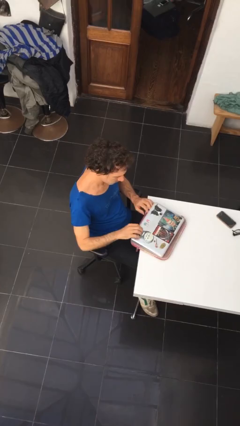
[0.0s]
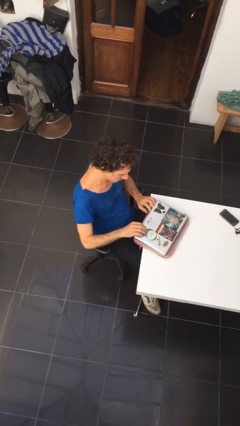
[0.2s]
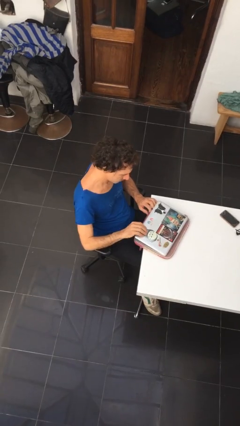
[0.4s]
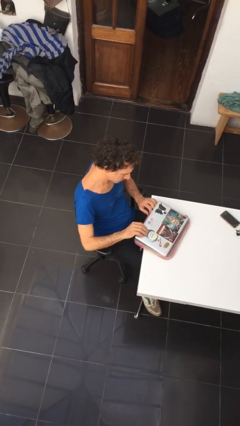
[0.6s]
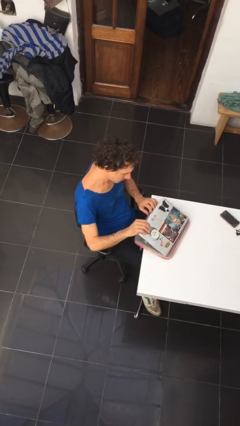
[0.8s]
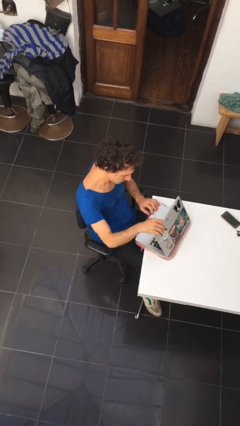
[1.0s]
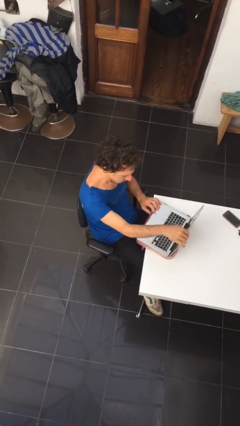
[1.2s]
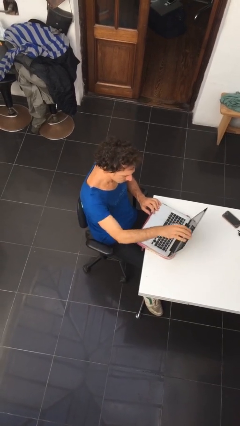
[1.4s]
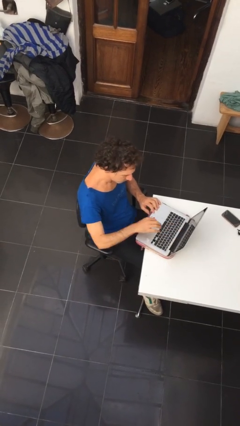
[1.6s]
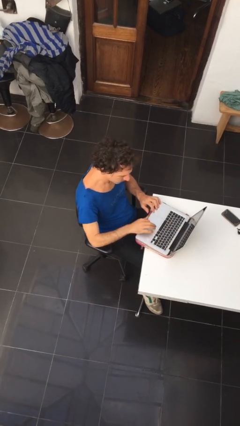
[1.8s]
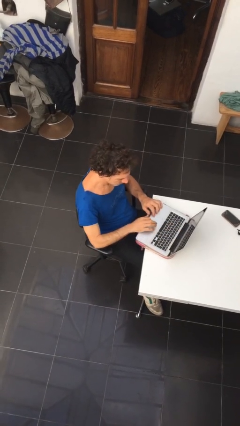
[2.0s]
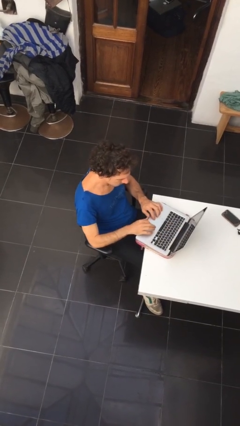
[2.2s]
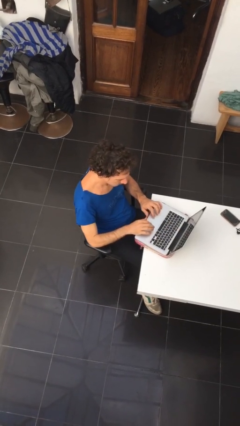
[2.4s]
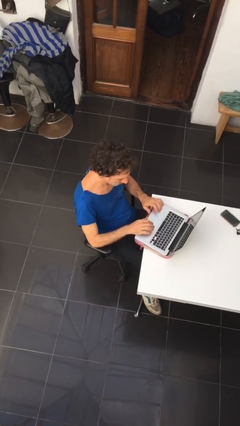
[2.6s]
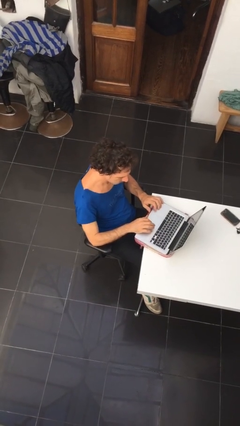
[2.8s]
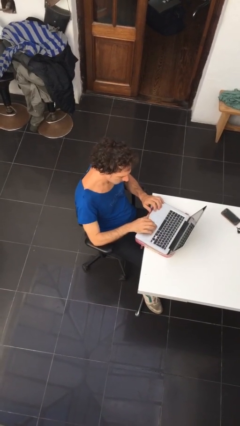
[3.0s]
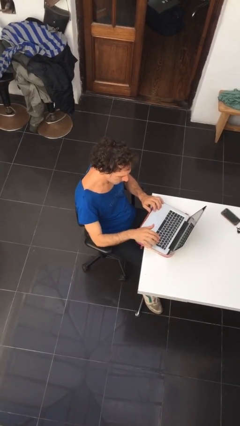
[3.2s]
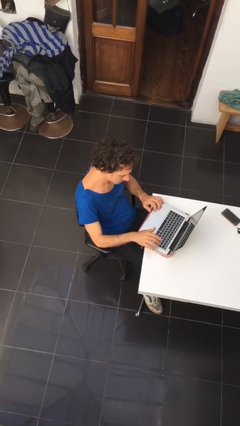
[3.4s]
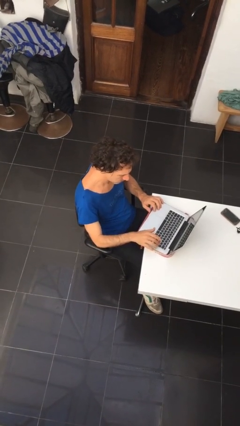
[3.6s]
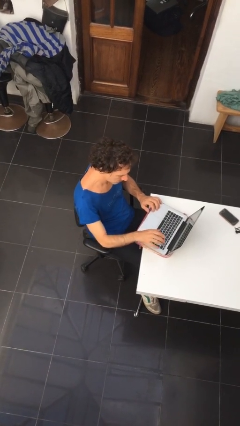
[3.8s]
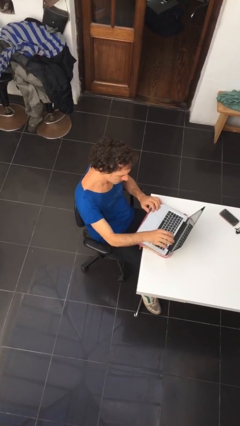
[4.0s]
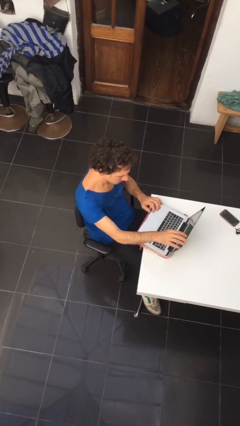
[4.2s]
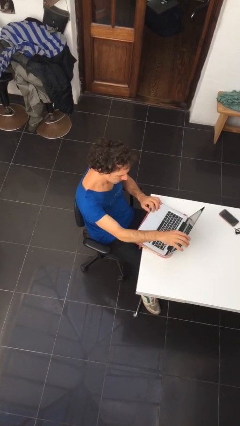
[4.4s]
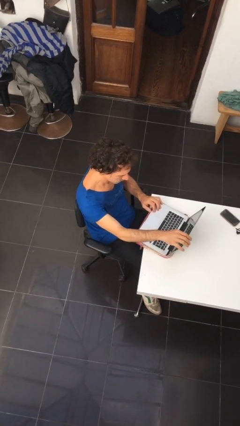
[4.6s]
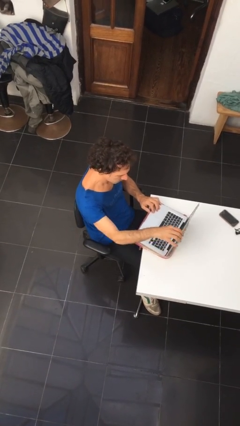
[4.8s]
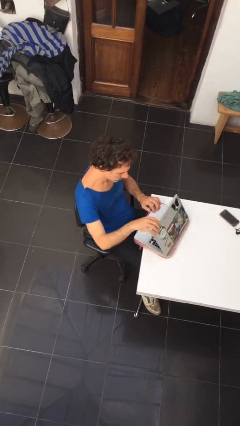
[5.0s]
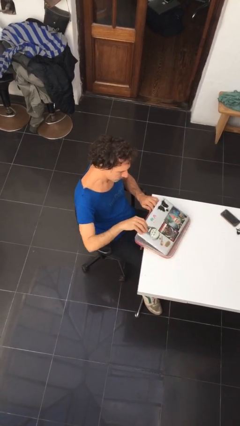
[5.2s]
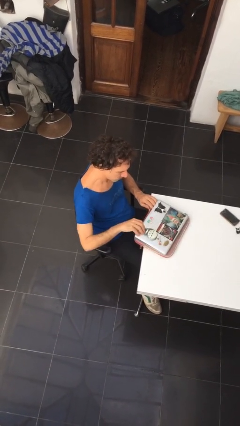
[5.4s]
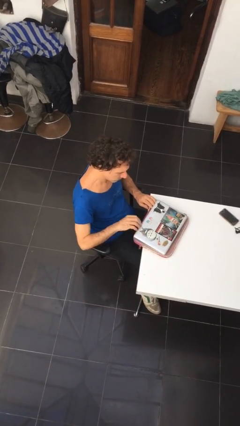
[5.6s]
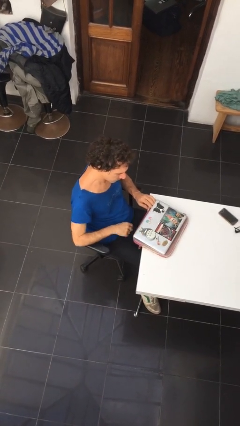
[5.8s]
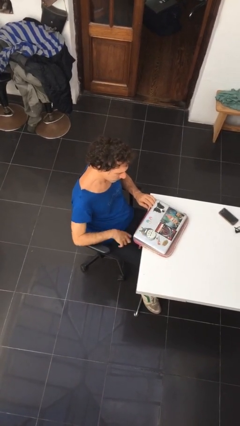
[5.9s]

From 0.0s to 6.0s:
person interacts with laptop

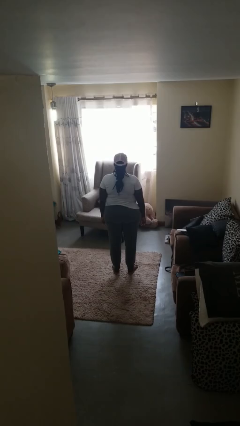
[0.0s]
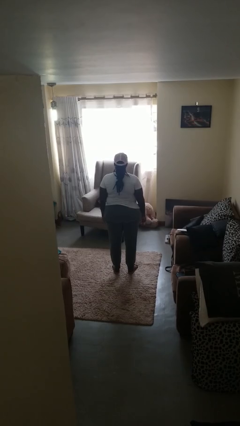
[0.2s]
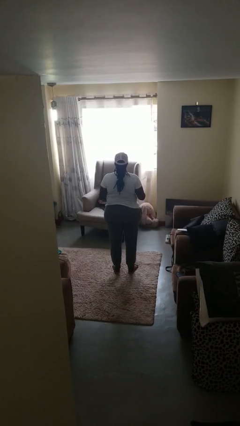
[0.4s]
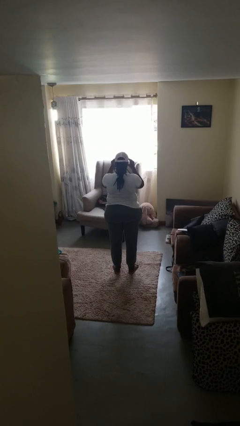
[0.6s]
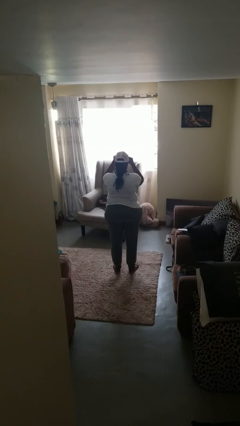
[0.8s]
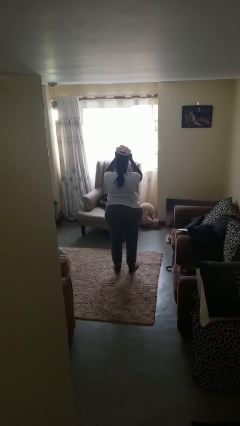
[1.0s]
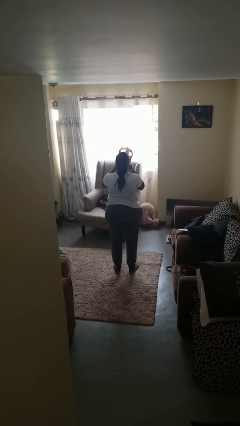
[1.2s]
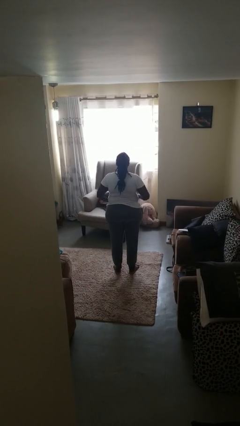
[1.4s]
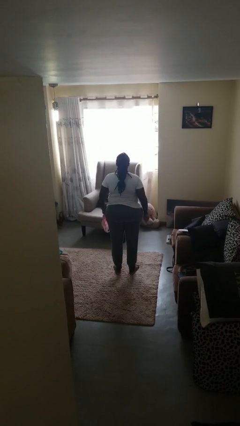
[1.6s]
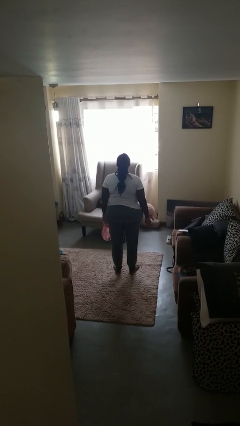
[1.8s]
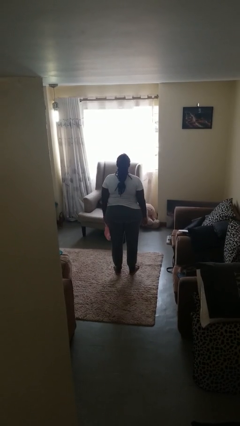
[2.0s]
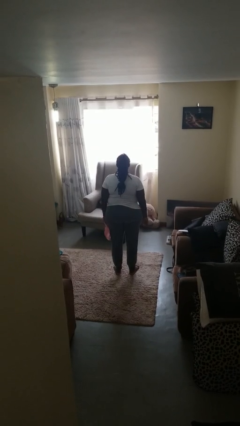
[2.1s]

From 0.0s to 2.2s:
person takes off hat

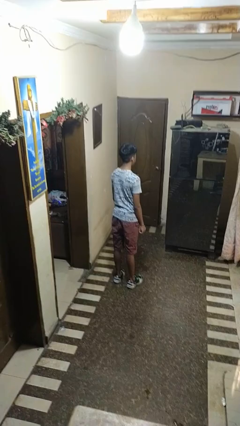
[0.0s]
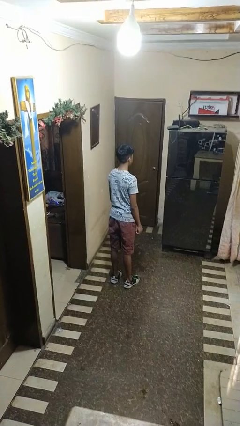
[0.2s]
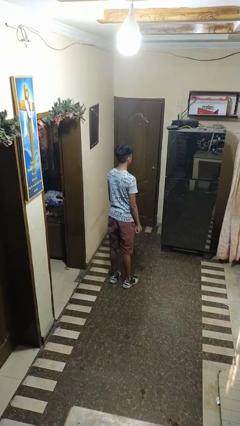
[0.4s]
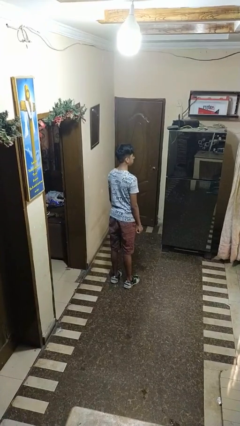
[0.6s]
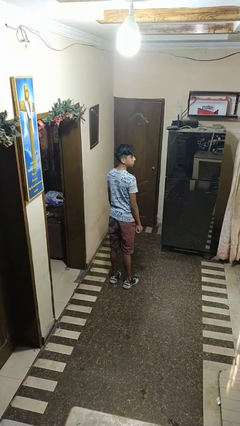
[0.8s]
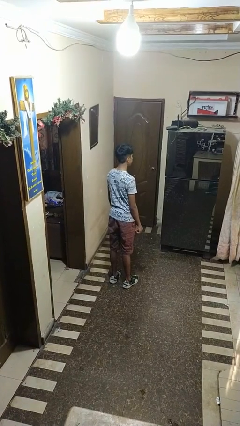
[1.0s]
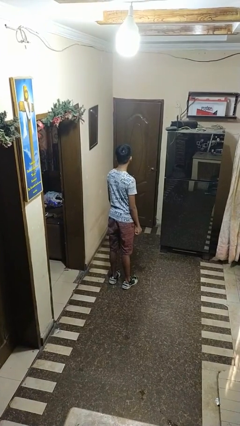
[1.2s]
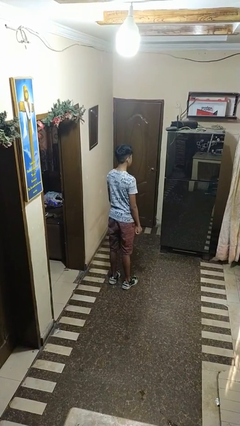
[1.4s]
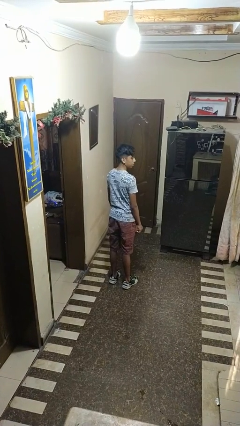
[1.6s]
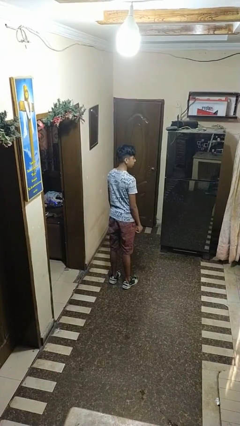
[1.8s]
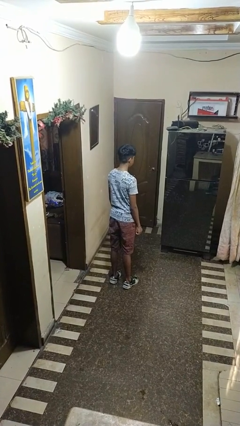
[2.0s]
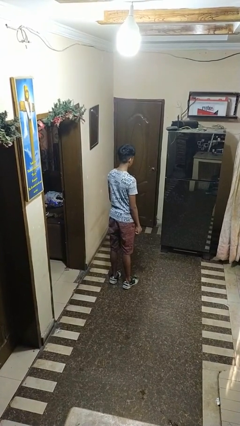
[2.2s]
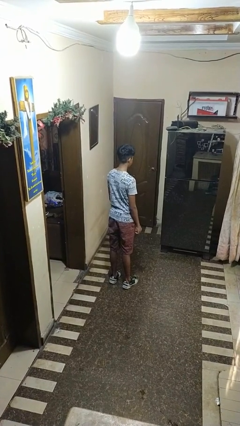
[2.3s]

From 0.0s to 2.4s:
person nods head

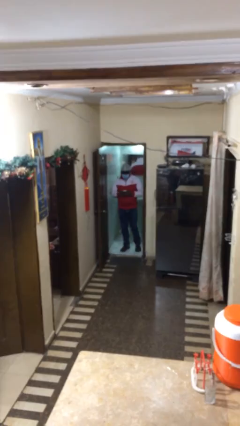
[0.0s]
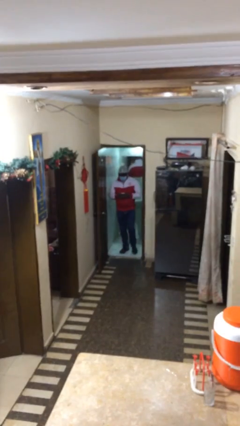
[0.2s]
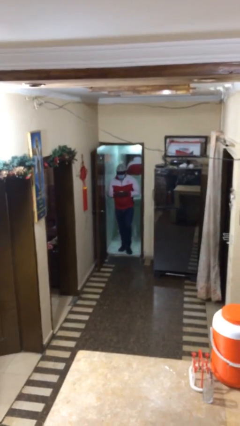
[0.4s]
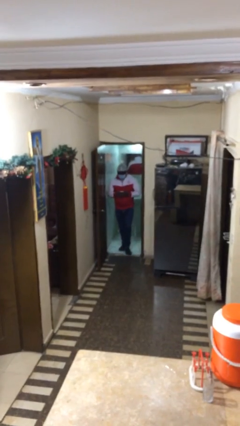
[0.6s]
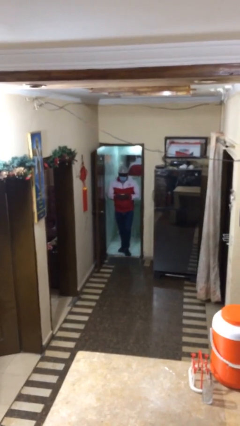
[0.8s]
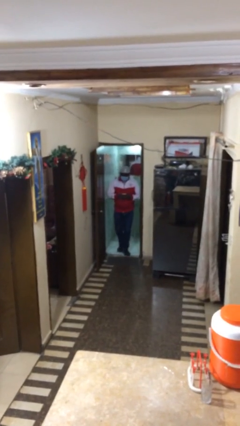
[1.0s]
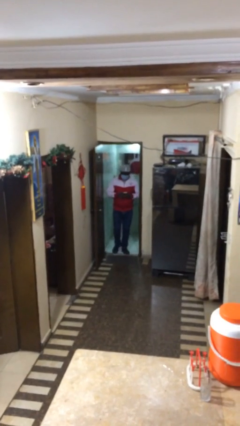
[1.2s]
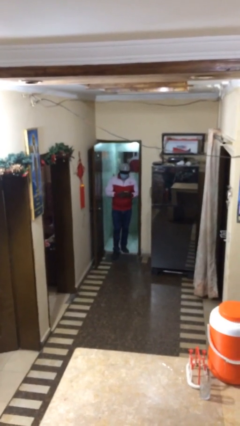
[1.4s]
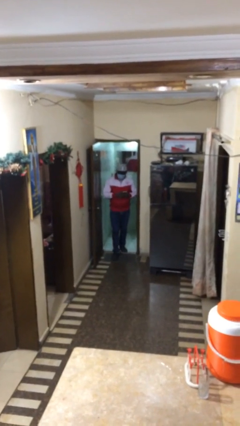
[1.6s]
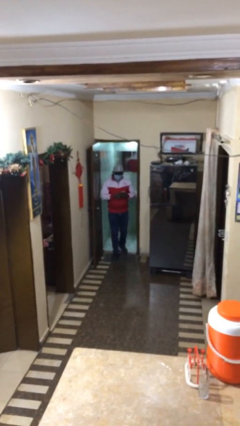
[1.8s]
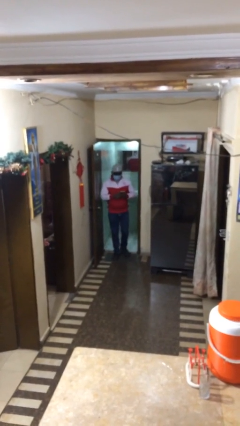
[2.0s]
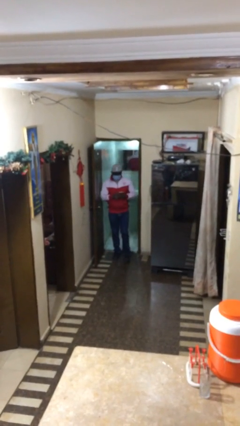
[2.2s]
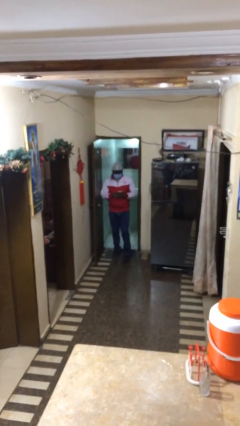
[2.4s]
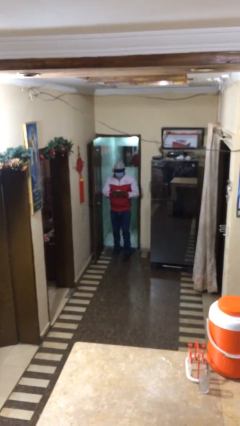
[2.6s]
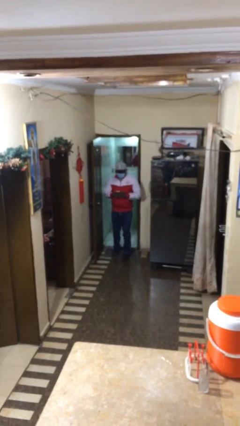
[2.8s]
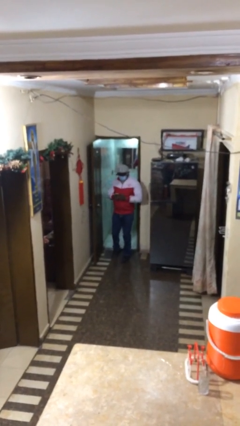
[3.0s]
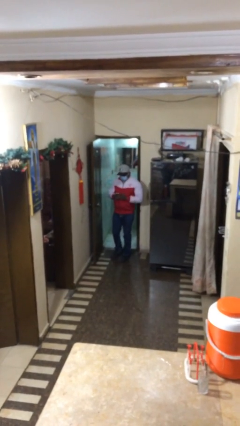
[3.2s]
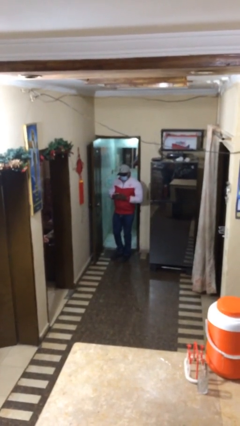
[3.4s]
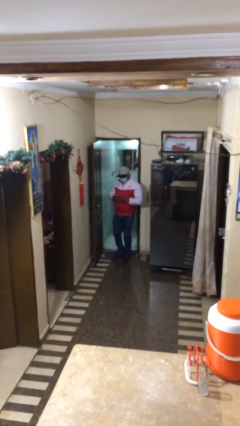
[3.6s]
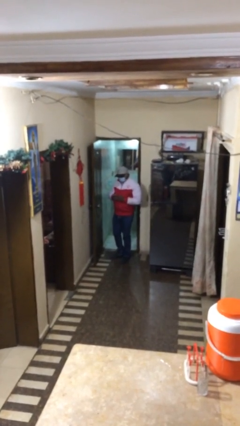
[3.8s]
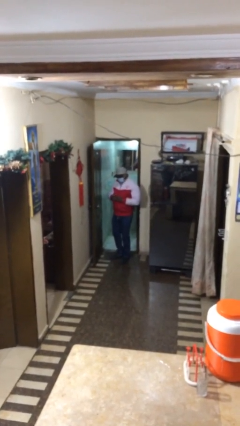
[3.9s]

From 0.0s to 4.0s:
person enters scene through structure

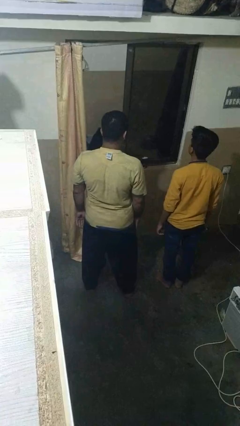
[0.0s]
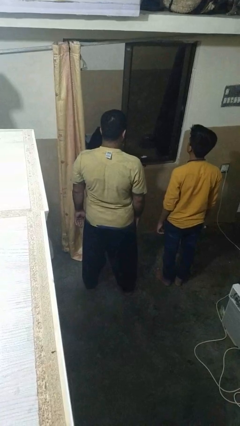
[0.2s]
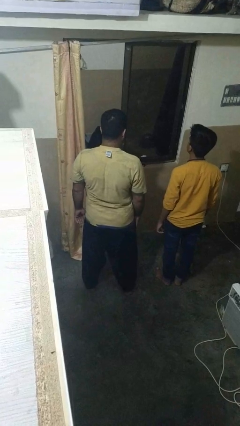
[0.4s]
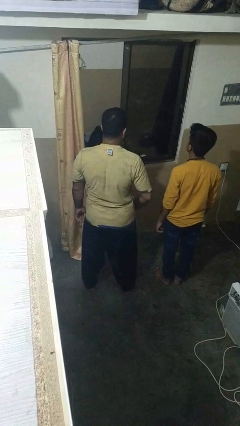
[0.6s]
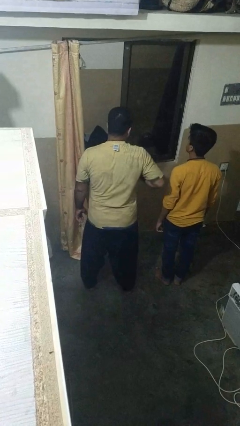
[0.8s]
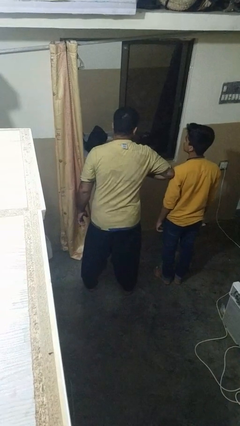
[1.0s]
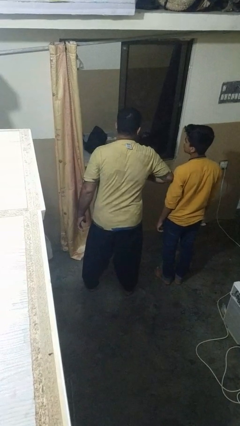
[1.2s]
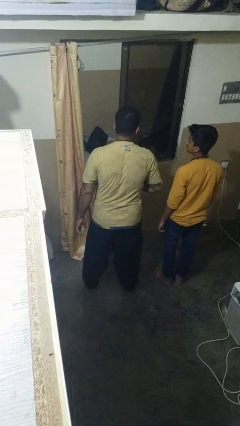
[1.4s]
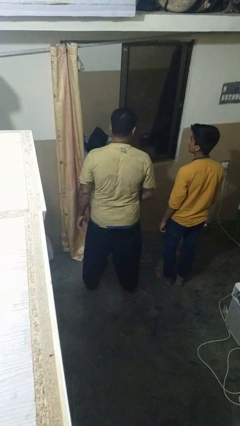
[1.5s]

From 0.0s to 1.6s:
person nudges person with elbow

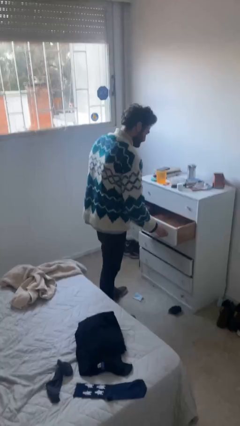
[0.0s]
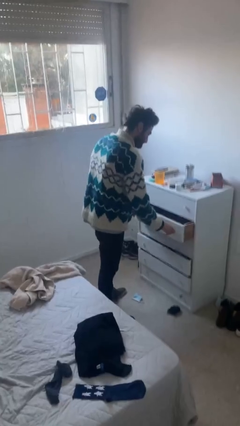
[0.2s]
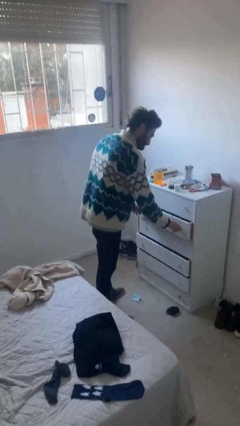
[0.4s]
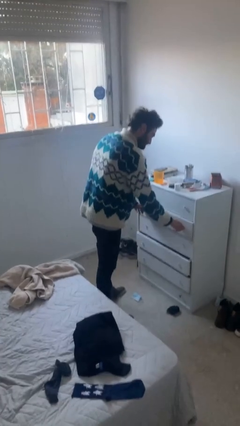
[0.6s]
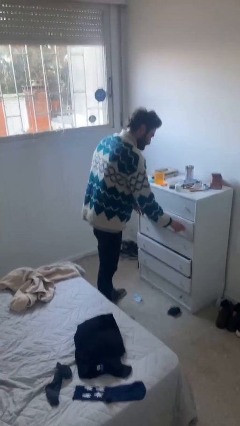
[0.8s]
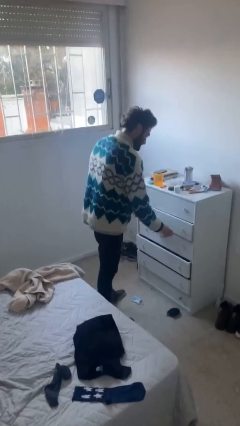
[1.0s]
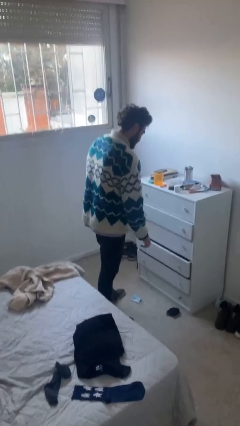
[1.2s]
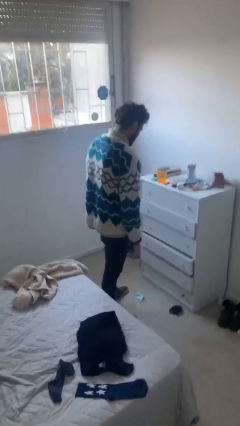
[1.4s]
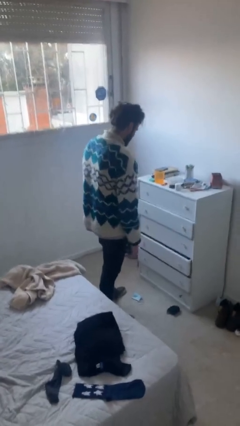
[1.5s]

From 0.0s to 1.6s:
person closes dresser drawer

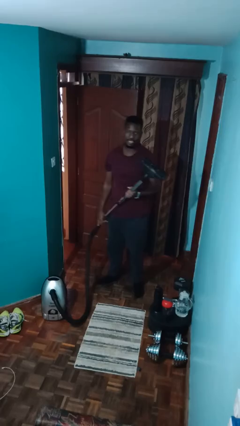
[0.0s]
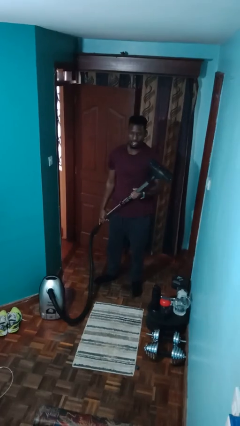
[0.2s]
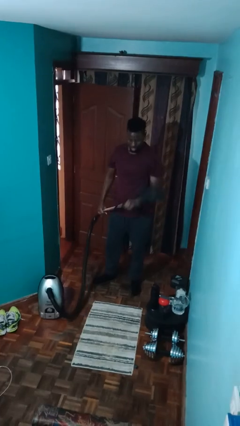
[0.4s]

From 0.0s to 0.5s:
person vacuums carpet
